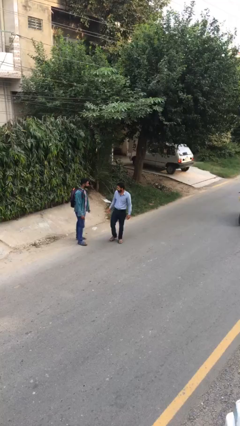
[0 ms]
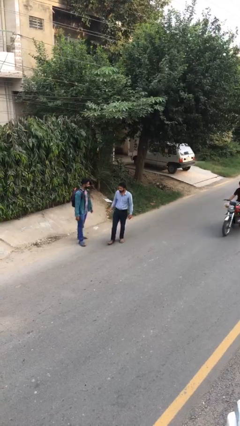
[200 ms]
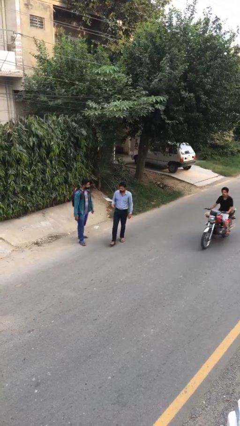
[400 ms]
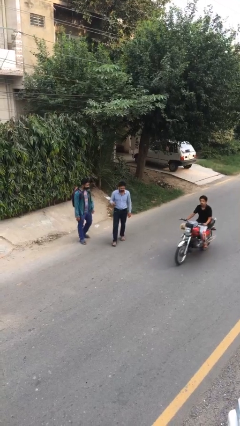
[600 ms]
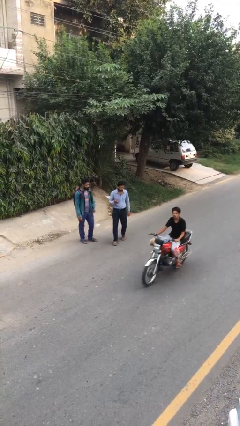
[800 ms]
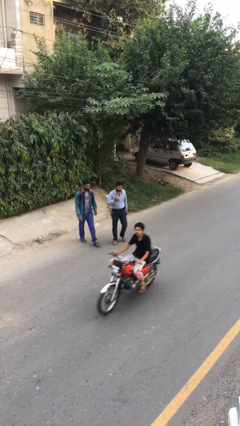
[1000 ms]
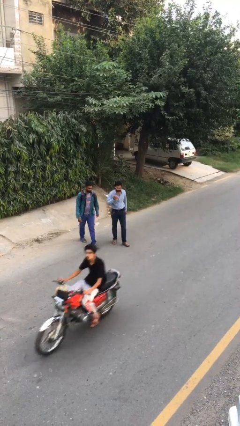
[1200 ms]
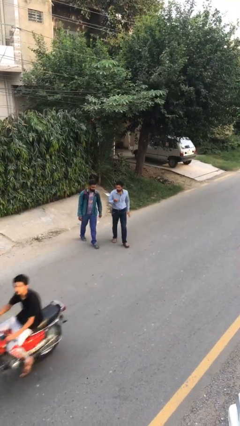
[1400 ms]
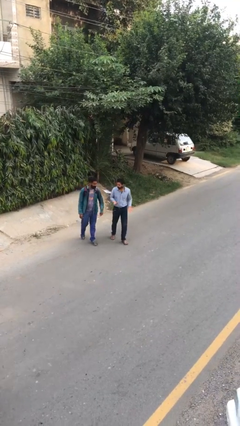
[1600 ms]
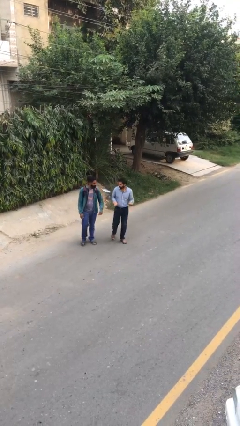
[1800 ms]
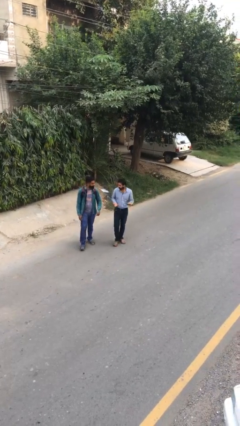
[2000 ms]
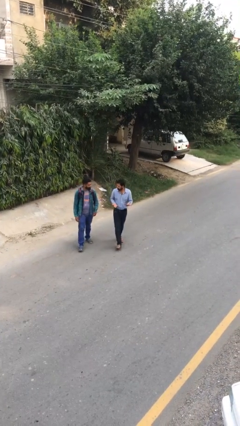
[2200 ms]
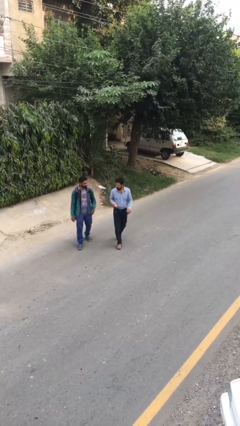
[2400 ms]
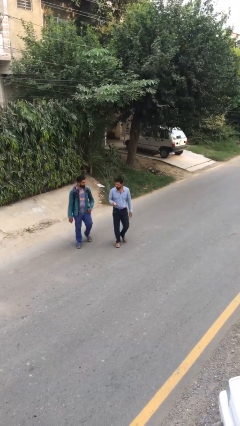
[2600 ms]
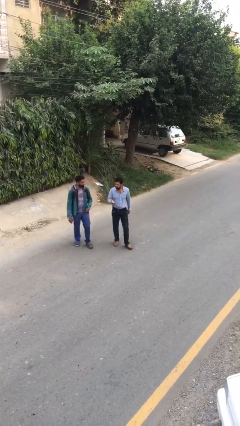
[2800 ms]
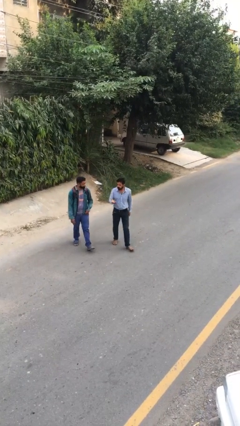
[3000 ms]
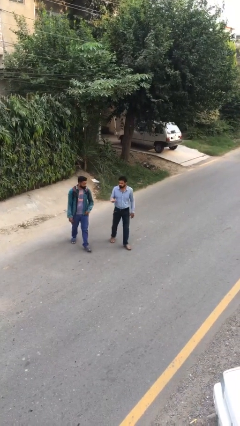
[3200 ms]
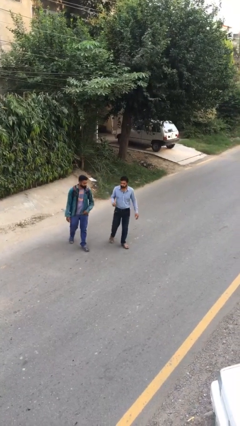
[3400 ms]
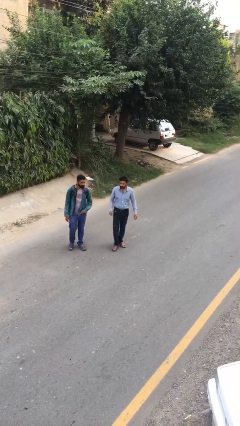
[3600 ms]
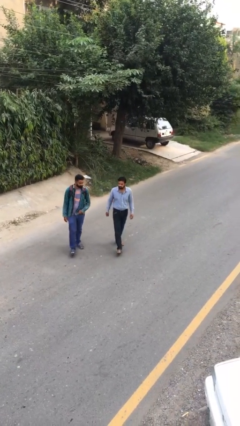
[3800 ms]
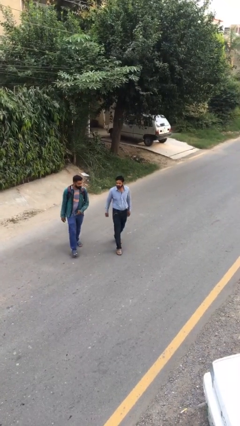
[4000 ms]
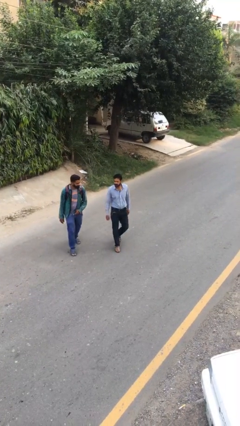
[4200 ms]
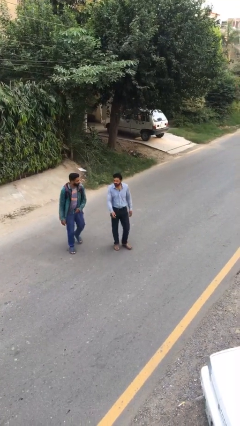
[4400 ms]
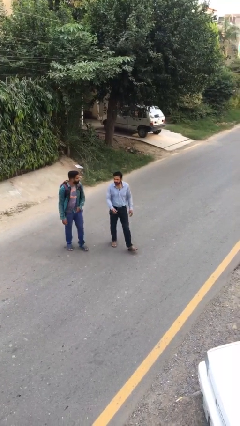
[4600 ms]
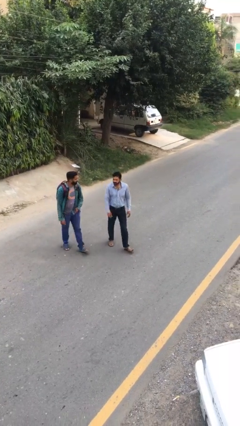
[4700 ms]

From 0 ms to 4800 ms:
person talks to person

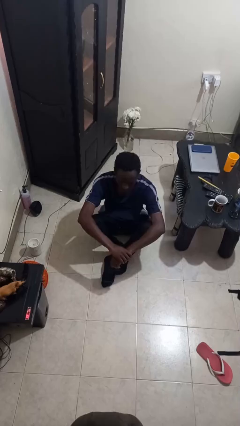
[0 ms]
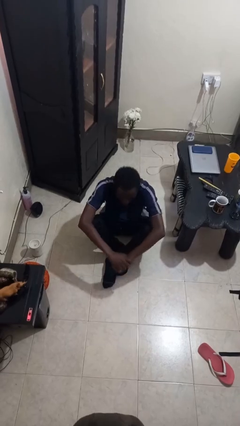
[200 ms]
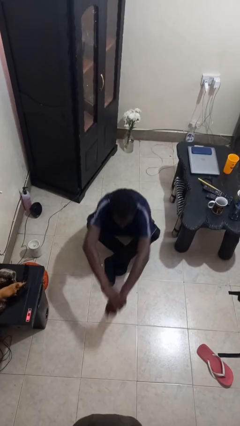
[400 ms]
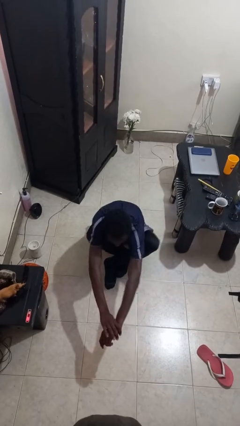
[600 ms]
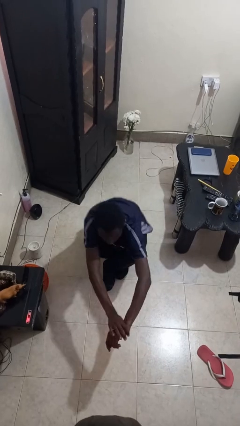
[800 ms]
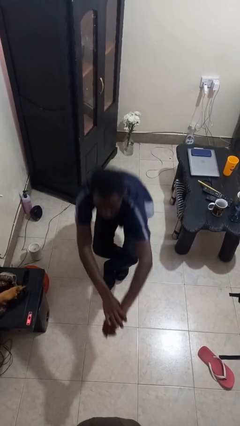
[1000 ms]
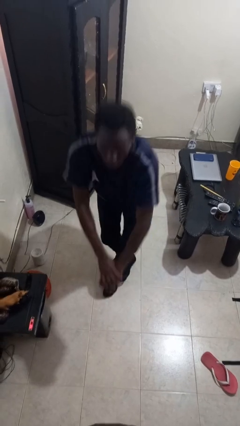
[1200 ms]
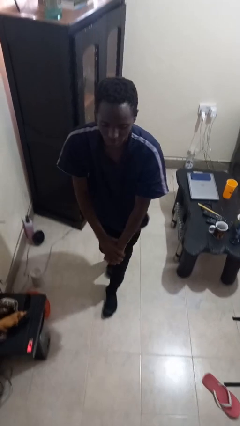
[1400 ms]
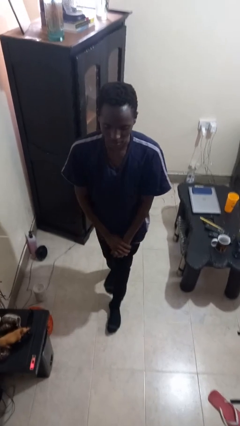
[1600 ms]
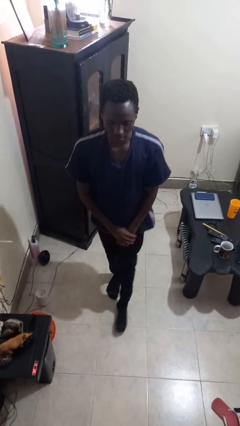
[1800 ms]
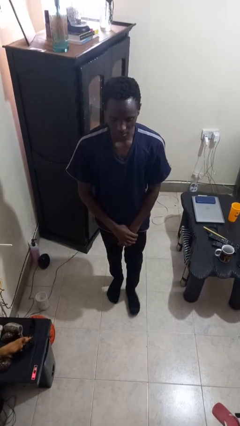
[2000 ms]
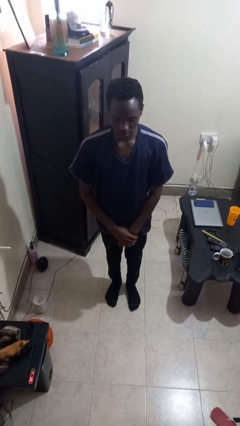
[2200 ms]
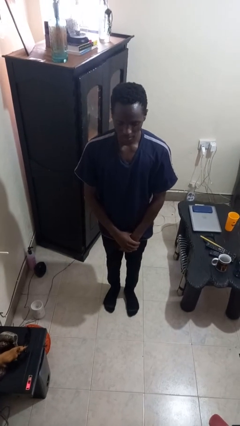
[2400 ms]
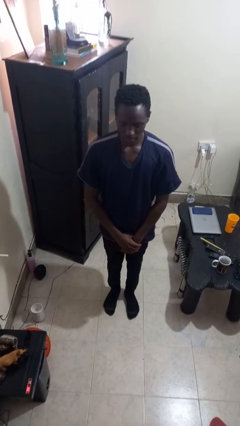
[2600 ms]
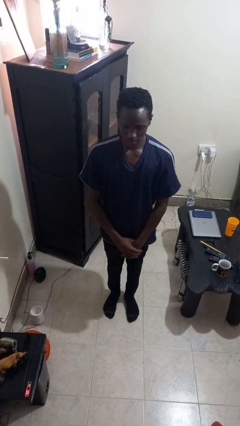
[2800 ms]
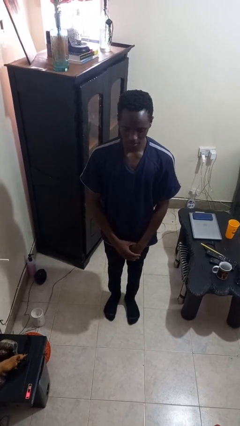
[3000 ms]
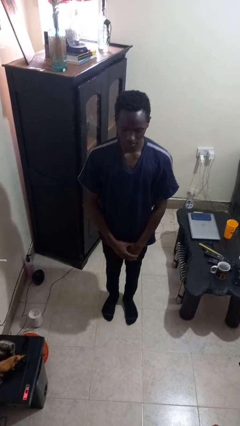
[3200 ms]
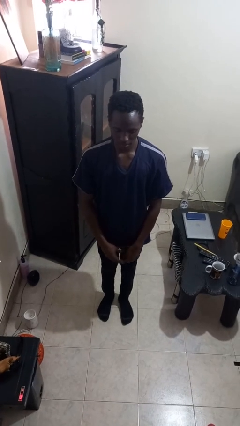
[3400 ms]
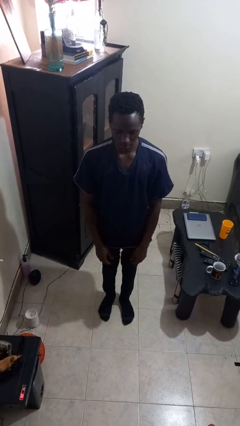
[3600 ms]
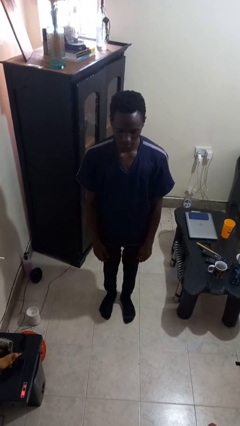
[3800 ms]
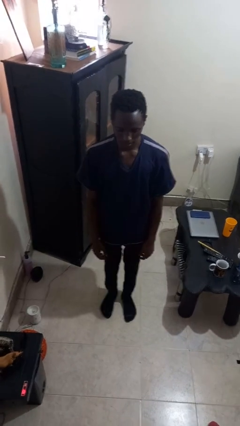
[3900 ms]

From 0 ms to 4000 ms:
person stands up from floor

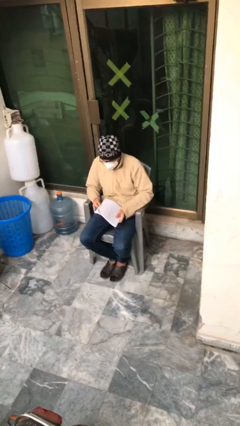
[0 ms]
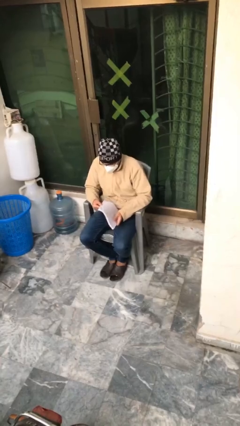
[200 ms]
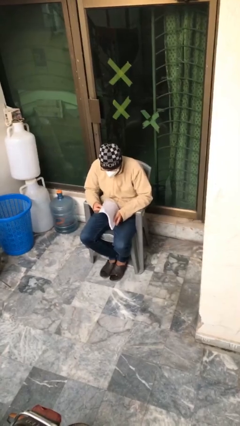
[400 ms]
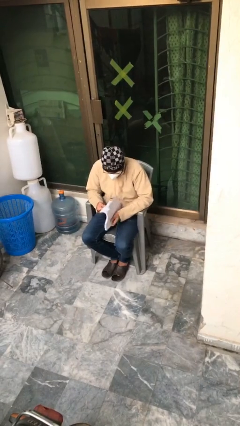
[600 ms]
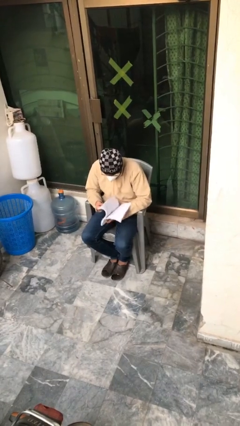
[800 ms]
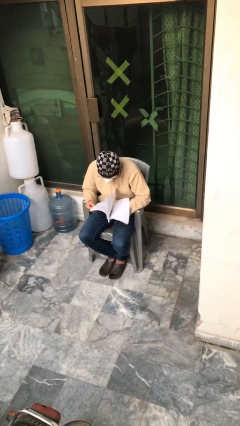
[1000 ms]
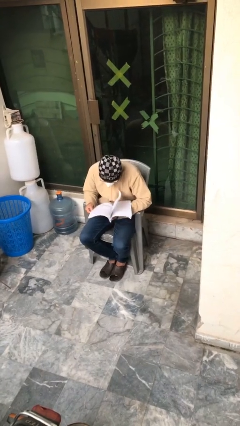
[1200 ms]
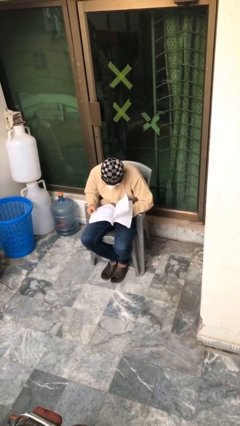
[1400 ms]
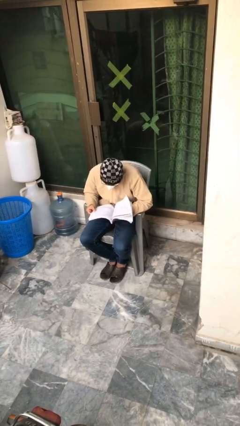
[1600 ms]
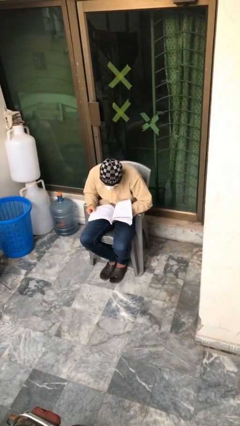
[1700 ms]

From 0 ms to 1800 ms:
person reads document

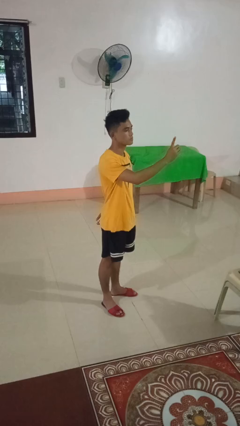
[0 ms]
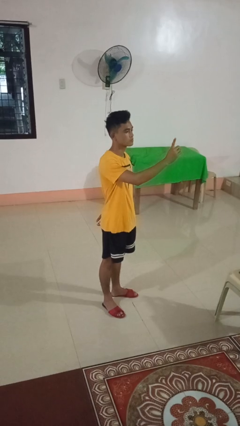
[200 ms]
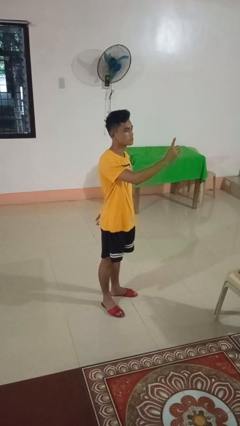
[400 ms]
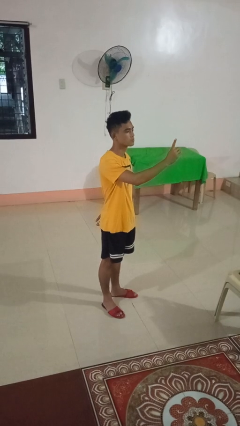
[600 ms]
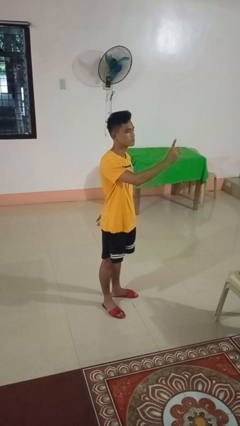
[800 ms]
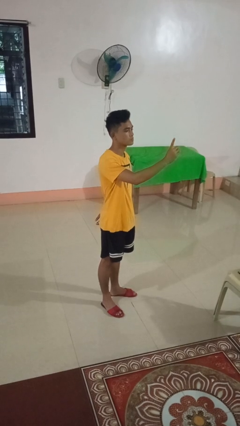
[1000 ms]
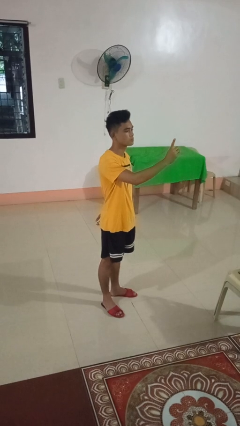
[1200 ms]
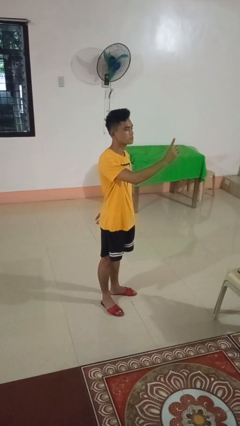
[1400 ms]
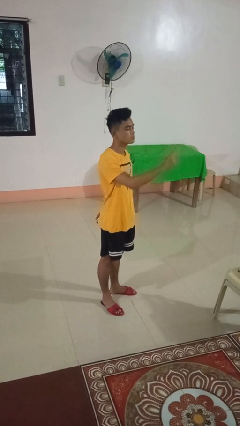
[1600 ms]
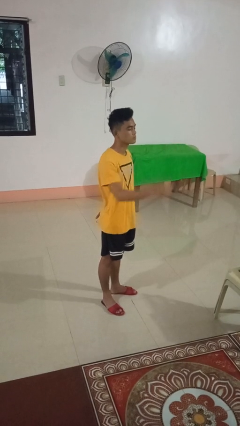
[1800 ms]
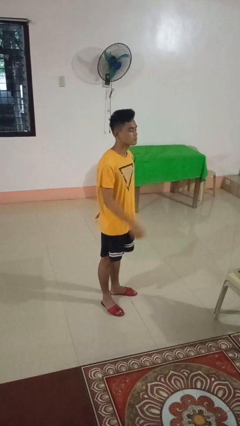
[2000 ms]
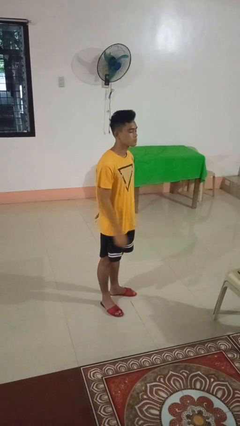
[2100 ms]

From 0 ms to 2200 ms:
person gestures number one

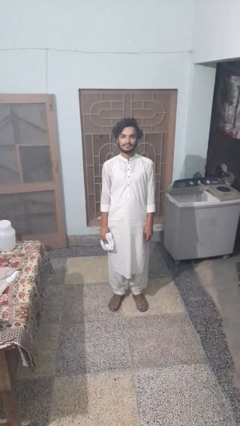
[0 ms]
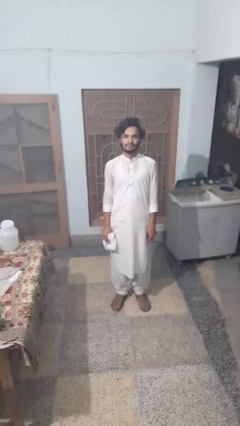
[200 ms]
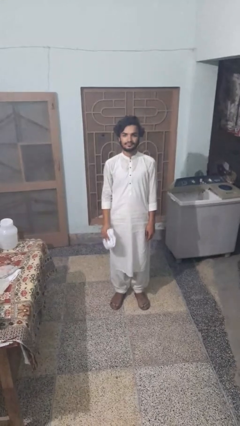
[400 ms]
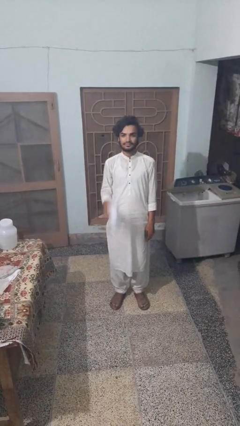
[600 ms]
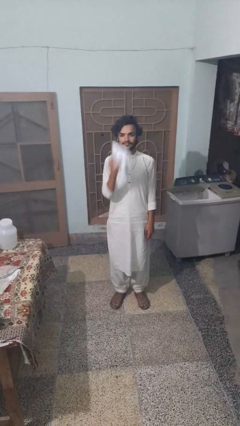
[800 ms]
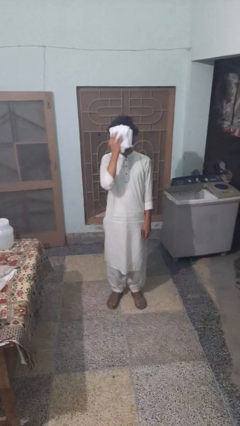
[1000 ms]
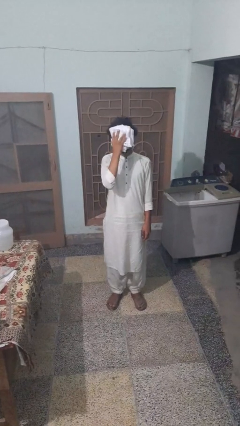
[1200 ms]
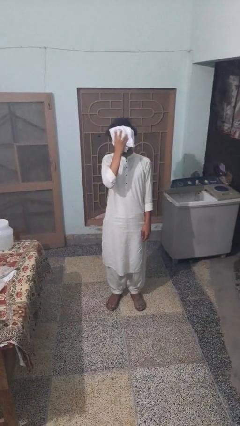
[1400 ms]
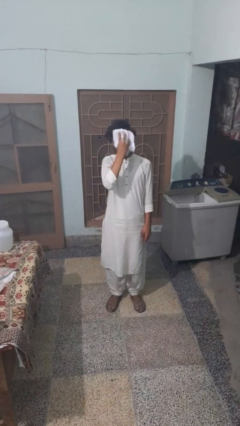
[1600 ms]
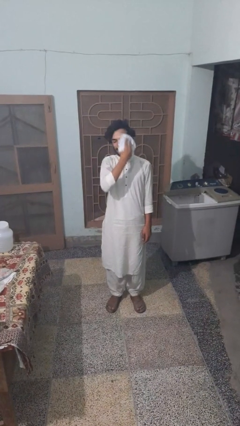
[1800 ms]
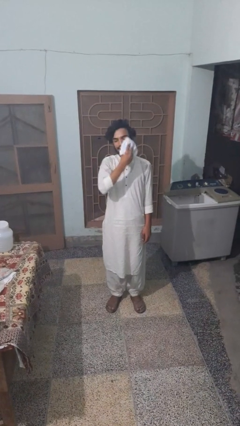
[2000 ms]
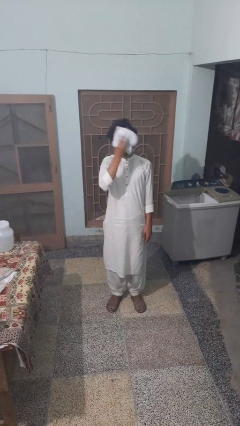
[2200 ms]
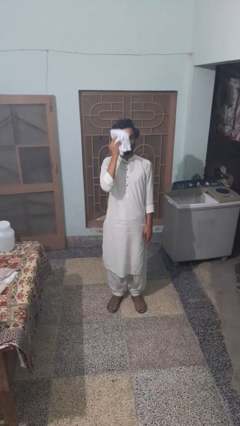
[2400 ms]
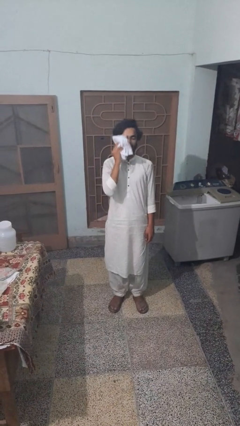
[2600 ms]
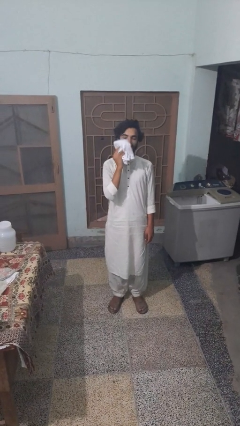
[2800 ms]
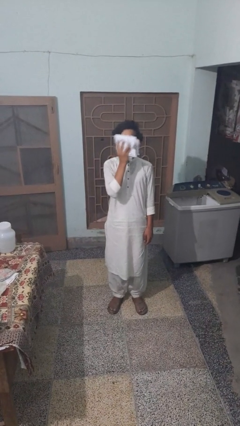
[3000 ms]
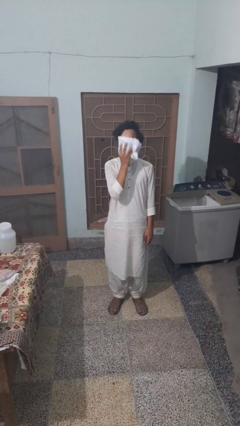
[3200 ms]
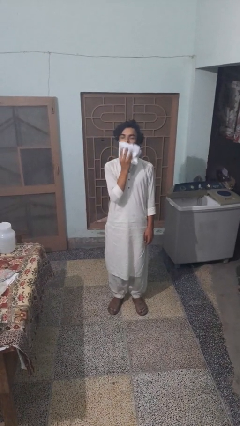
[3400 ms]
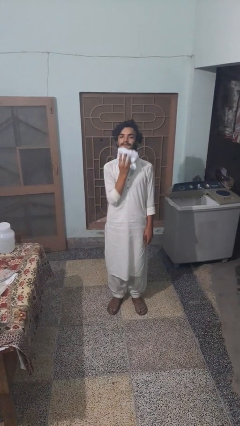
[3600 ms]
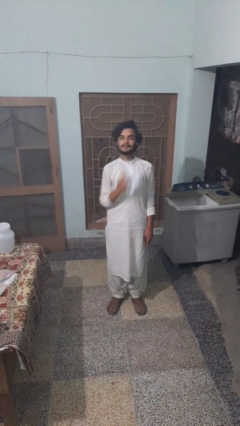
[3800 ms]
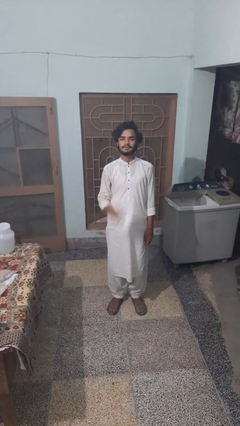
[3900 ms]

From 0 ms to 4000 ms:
person wipes mouth with napkin

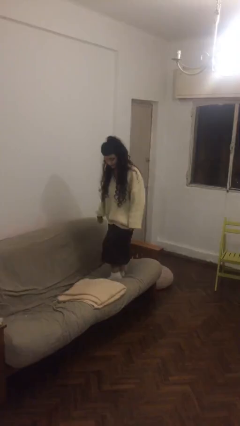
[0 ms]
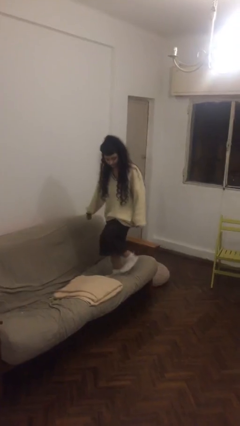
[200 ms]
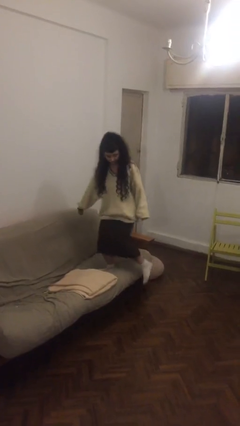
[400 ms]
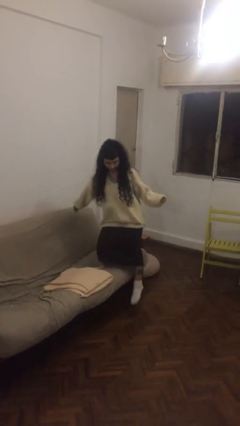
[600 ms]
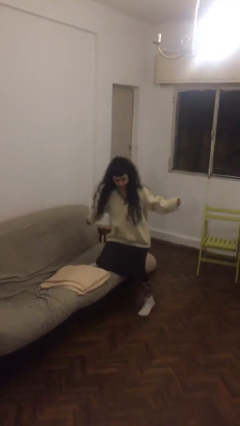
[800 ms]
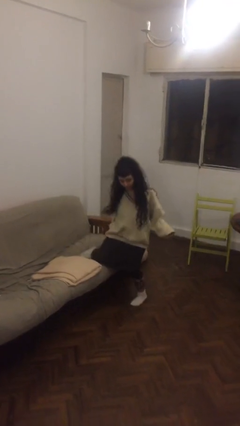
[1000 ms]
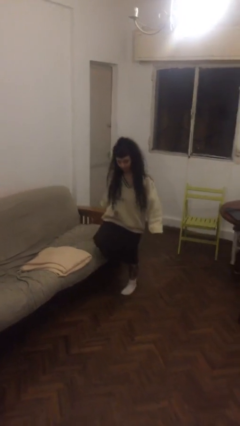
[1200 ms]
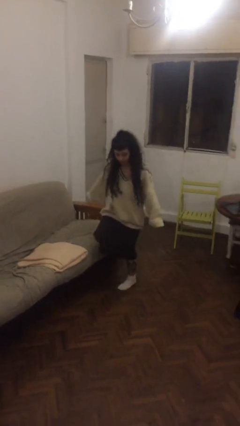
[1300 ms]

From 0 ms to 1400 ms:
person climbs off couch
